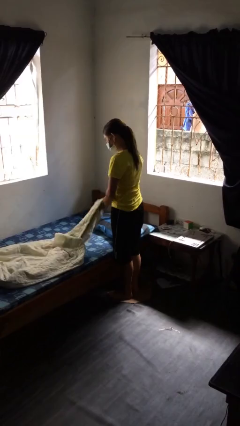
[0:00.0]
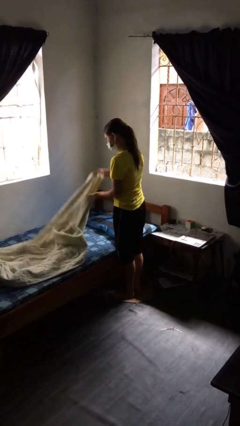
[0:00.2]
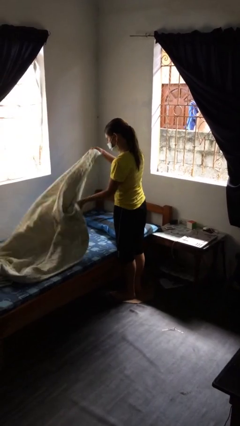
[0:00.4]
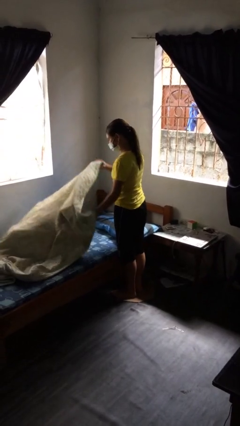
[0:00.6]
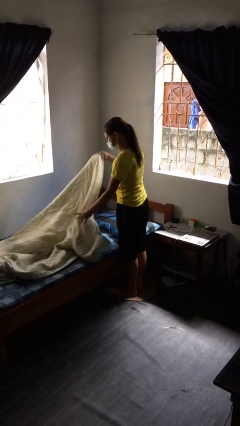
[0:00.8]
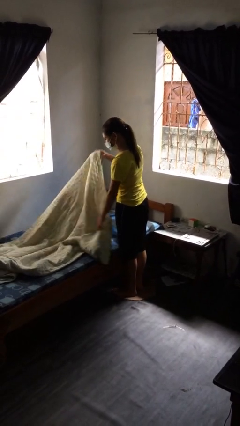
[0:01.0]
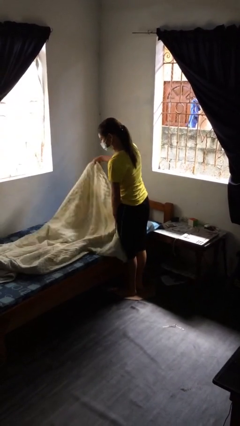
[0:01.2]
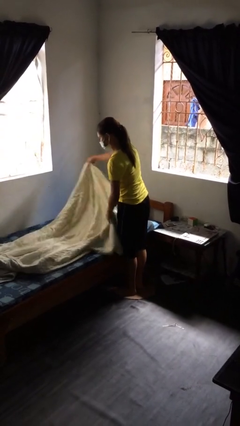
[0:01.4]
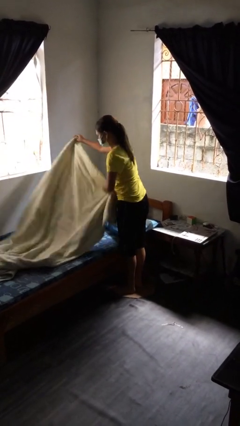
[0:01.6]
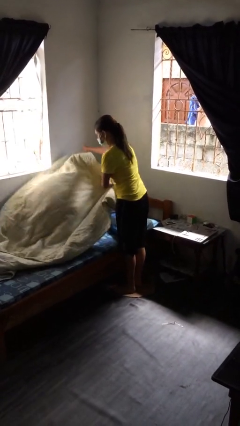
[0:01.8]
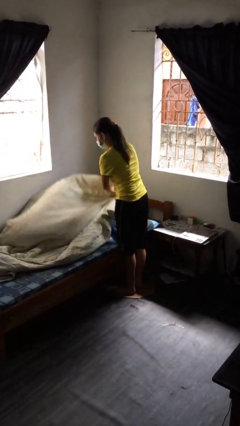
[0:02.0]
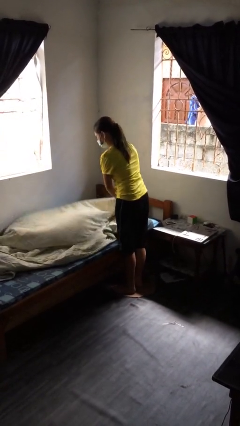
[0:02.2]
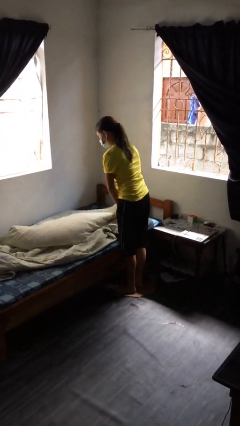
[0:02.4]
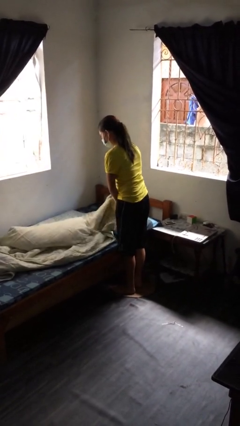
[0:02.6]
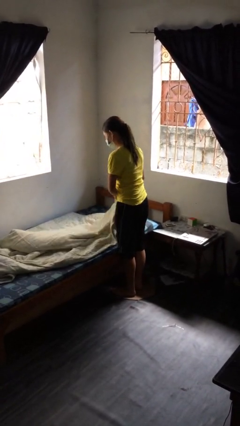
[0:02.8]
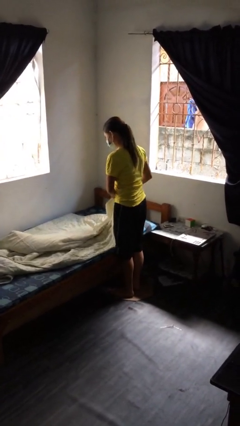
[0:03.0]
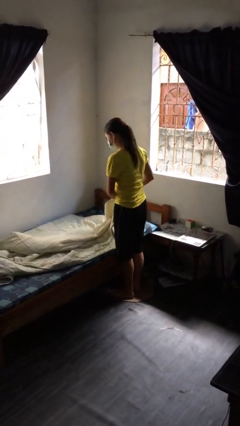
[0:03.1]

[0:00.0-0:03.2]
person makes bed

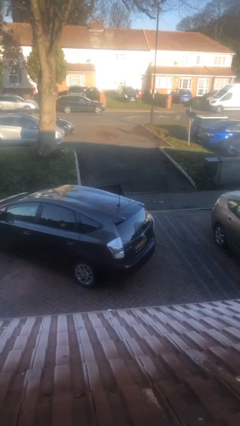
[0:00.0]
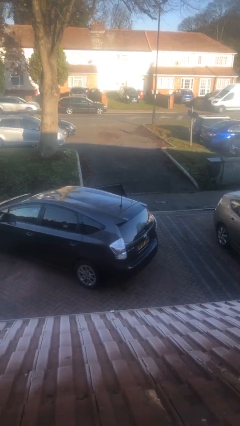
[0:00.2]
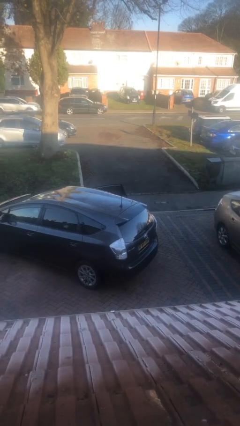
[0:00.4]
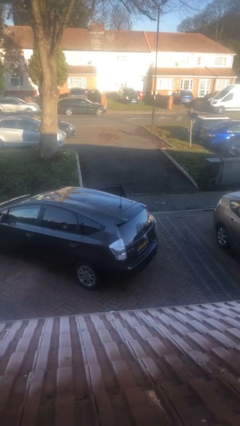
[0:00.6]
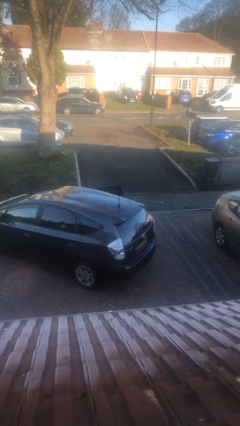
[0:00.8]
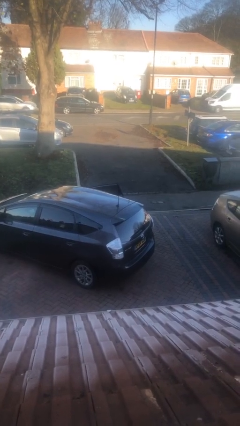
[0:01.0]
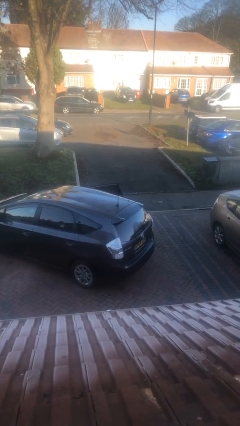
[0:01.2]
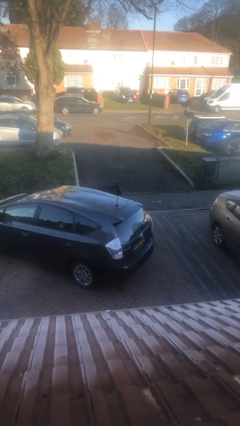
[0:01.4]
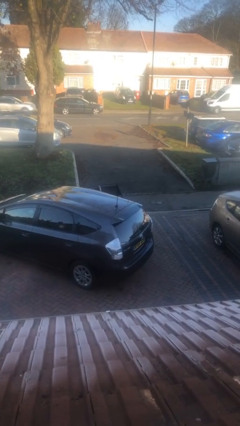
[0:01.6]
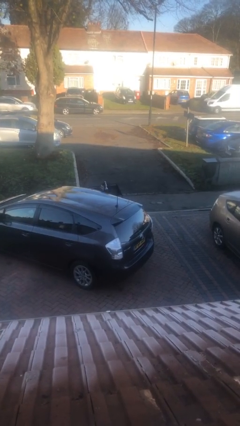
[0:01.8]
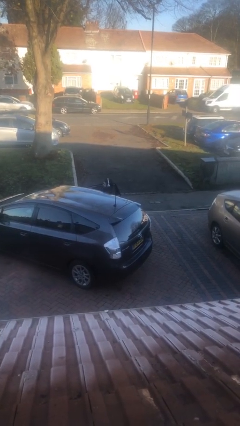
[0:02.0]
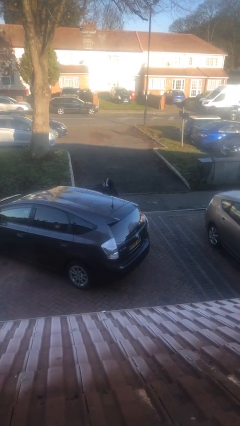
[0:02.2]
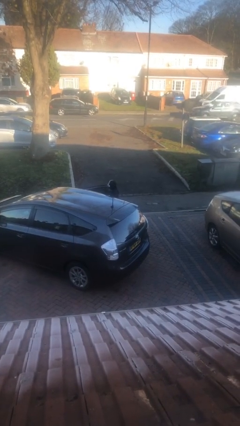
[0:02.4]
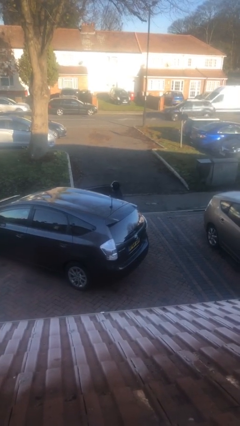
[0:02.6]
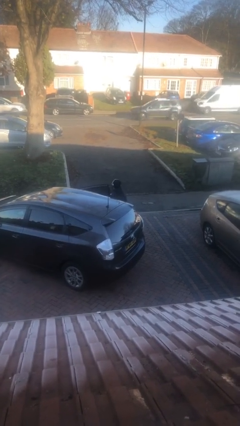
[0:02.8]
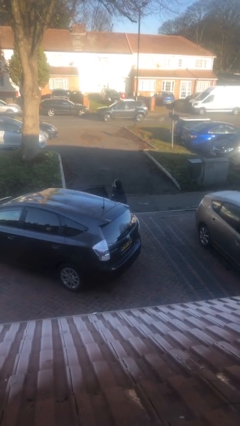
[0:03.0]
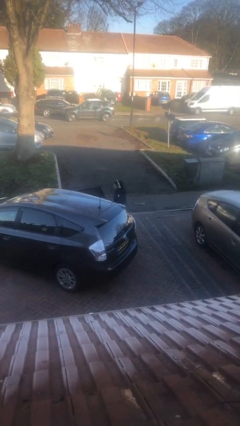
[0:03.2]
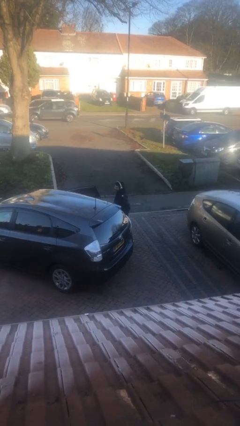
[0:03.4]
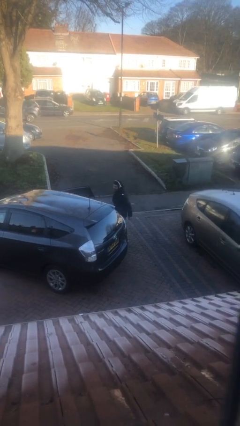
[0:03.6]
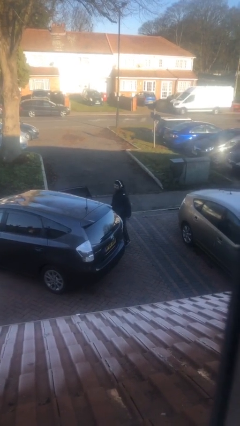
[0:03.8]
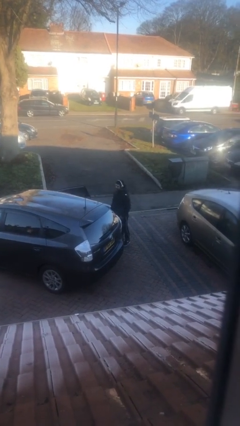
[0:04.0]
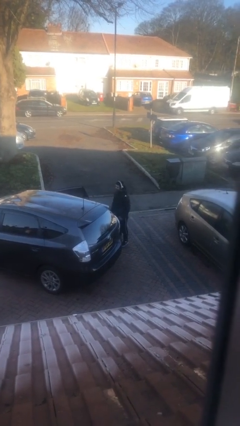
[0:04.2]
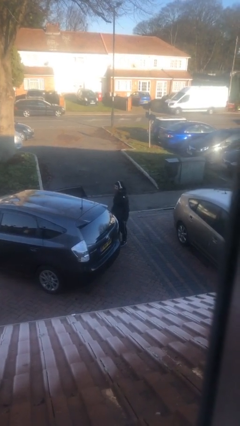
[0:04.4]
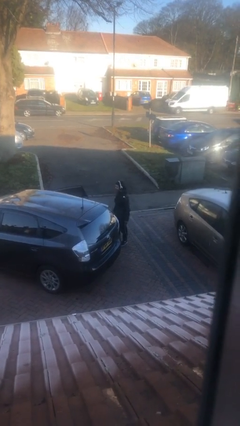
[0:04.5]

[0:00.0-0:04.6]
person exits car

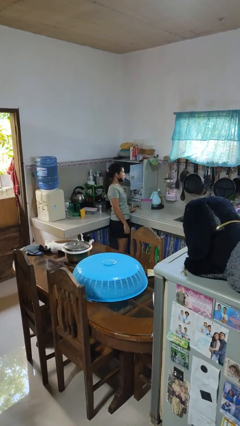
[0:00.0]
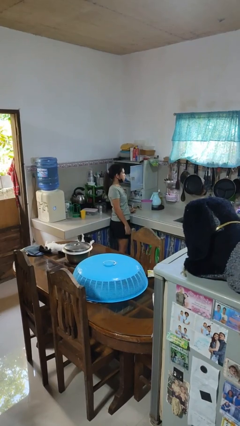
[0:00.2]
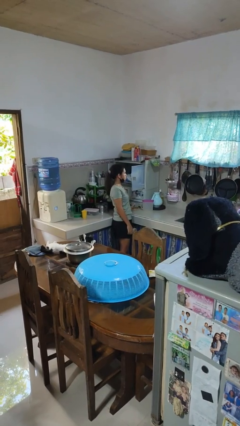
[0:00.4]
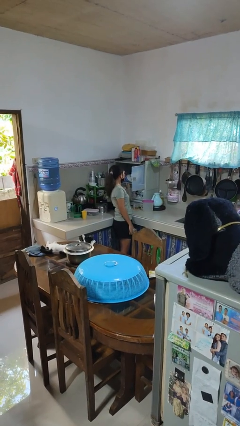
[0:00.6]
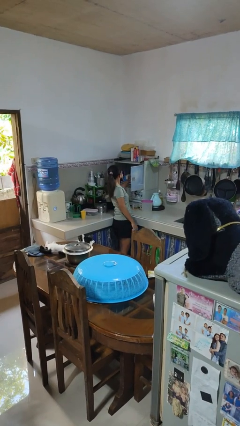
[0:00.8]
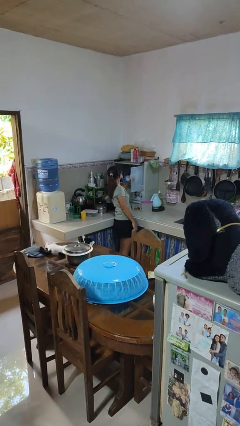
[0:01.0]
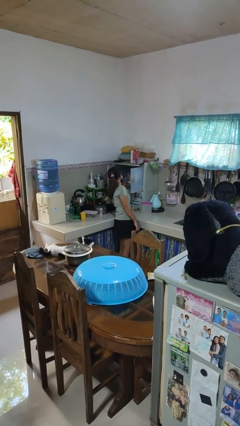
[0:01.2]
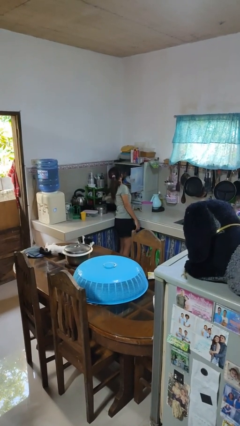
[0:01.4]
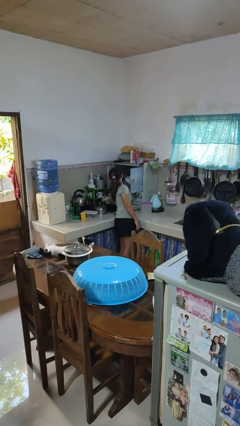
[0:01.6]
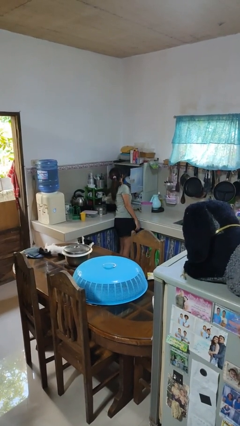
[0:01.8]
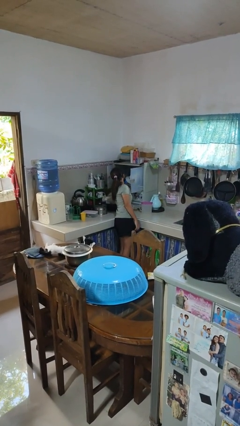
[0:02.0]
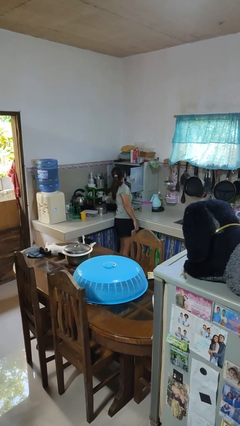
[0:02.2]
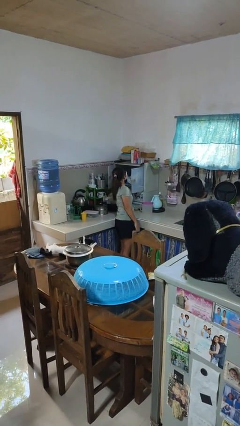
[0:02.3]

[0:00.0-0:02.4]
person searches in kitchen drawer

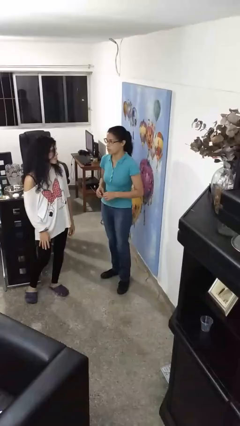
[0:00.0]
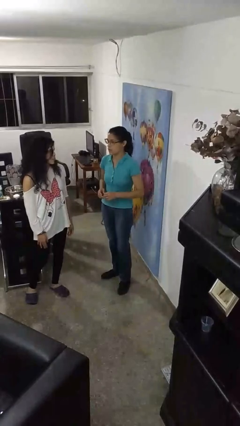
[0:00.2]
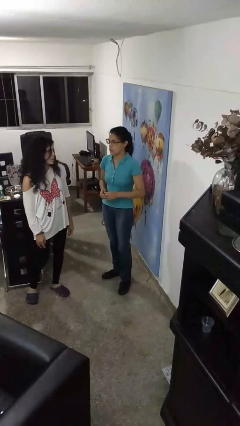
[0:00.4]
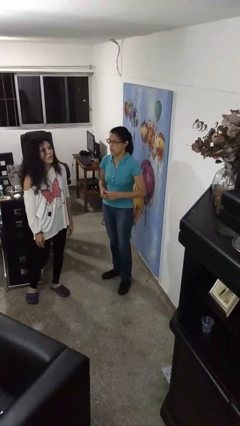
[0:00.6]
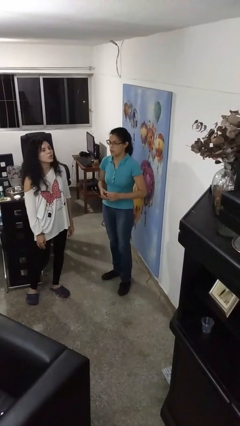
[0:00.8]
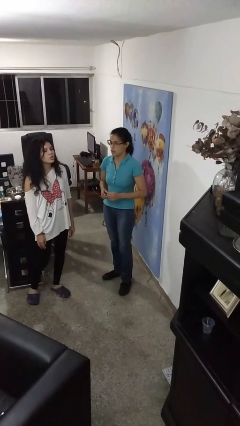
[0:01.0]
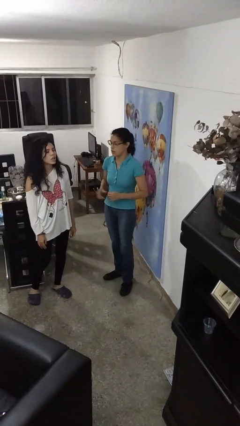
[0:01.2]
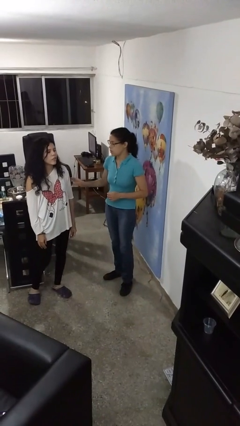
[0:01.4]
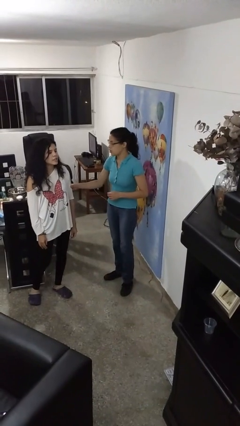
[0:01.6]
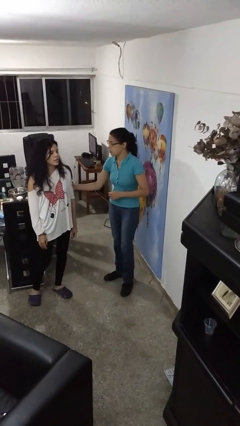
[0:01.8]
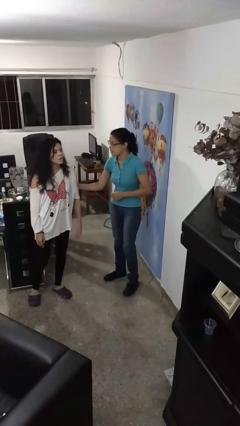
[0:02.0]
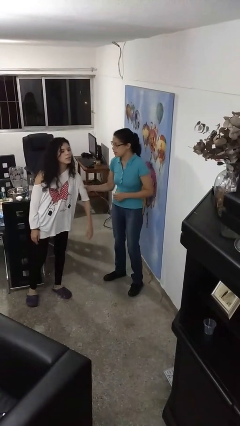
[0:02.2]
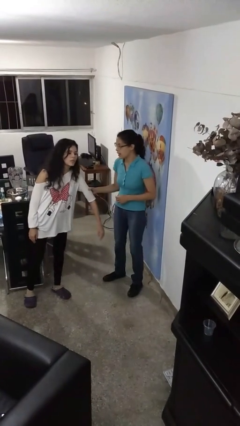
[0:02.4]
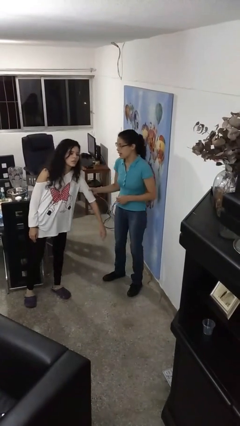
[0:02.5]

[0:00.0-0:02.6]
person grabs person by bicep

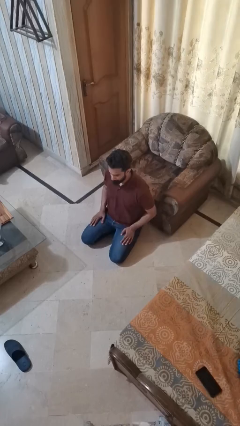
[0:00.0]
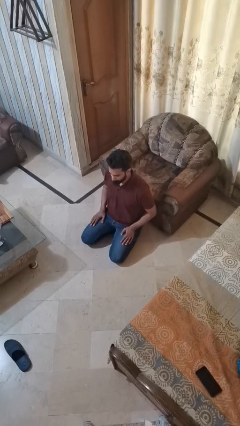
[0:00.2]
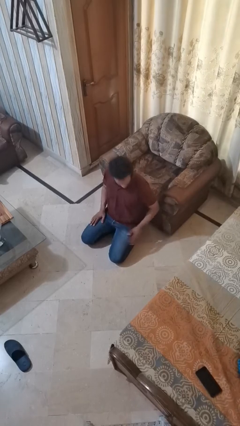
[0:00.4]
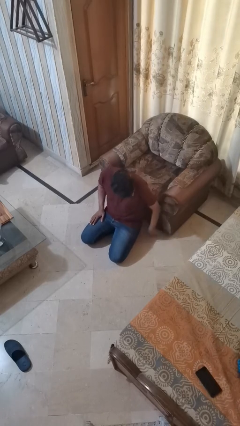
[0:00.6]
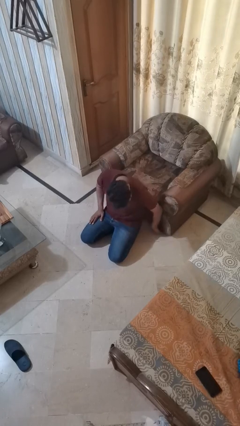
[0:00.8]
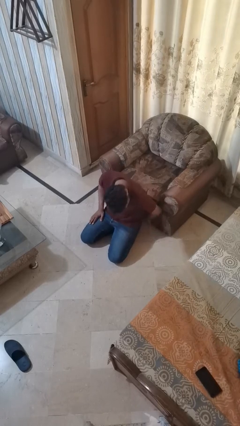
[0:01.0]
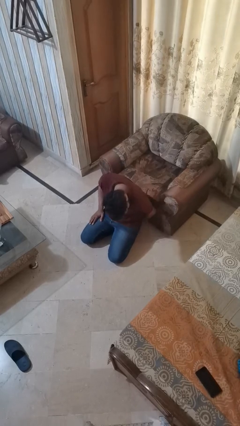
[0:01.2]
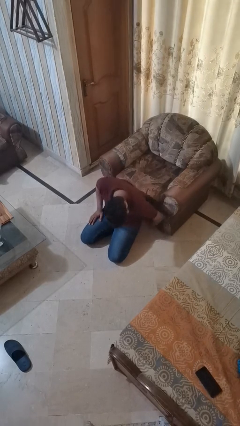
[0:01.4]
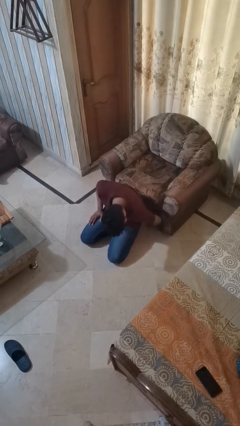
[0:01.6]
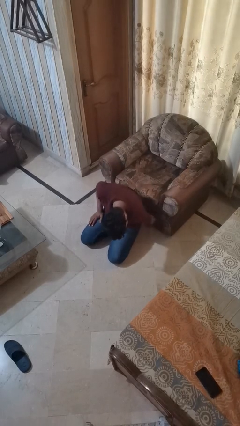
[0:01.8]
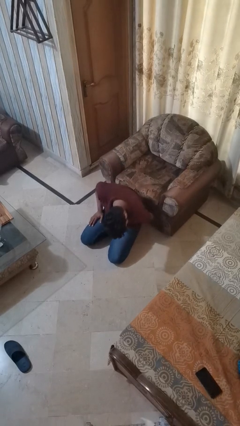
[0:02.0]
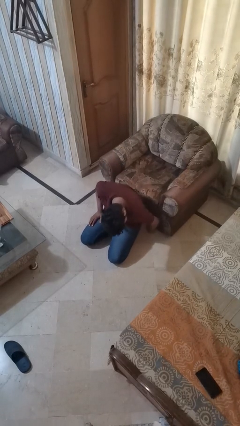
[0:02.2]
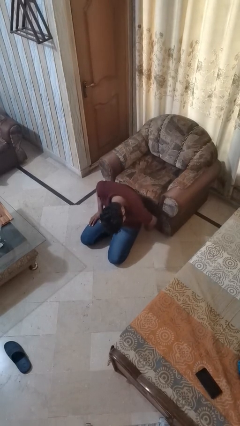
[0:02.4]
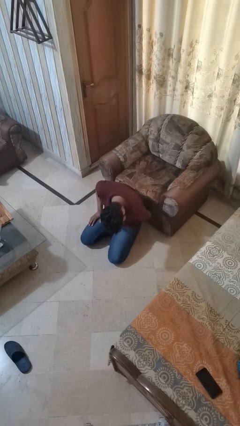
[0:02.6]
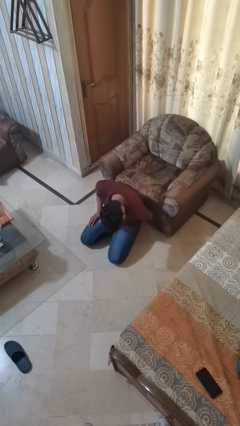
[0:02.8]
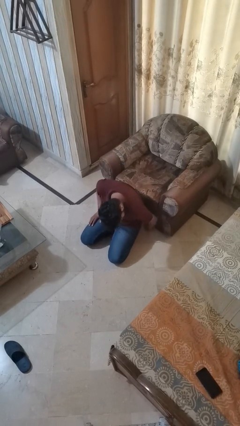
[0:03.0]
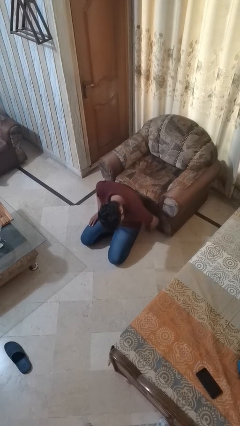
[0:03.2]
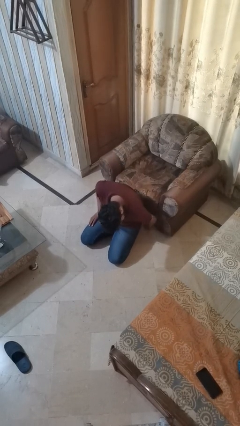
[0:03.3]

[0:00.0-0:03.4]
person searches under couch

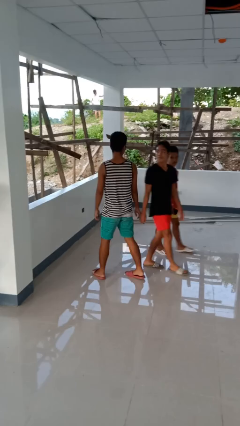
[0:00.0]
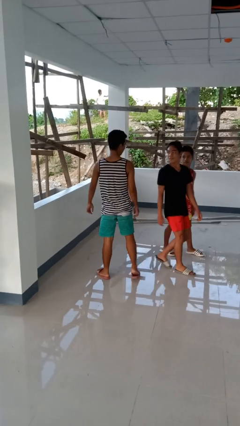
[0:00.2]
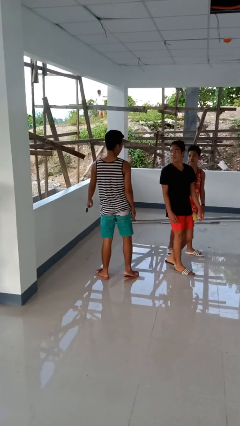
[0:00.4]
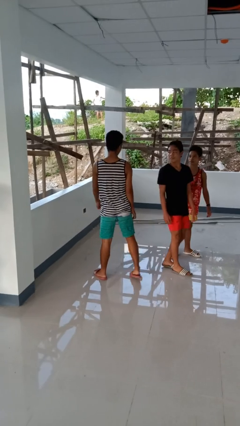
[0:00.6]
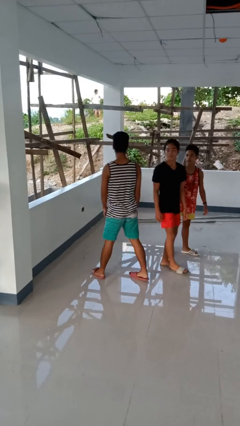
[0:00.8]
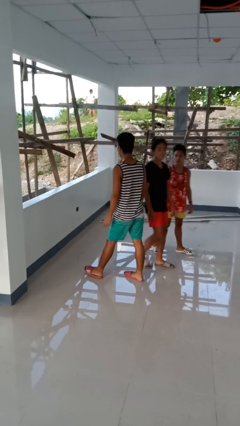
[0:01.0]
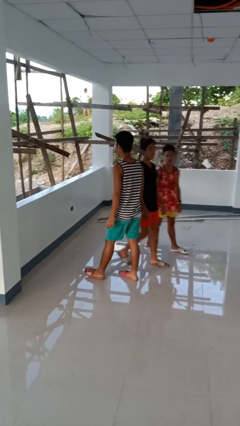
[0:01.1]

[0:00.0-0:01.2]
person bumps into person
